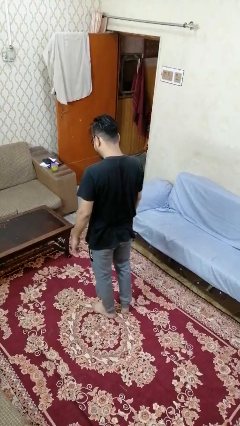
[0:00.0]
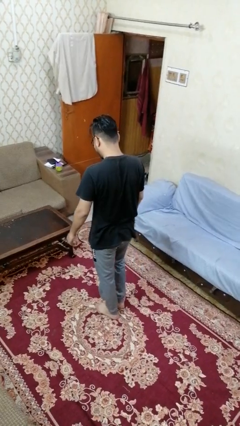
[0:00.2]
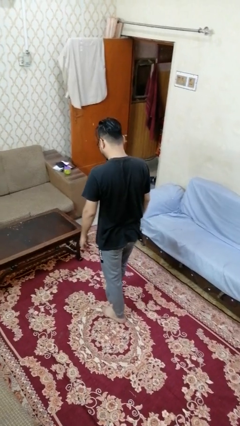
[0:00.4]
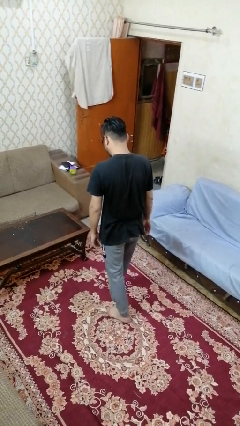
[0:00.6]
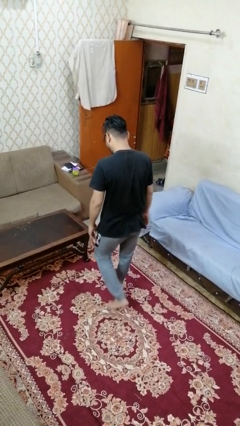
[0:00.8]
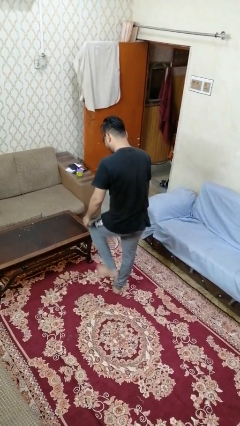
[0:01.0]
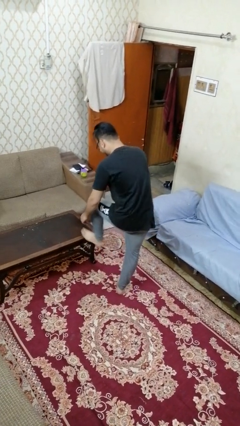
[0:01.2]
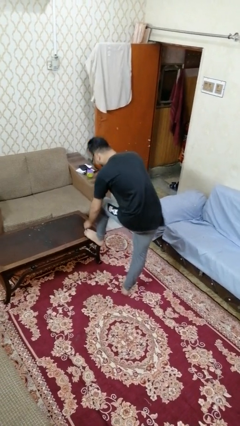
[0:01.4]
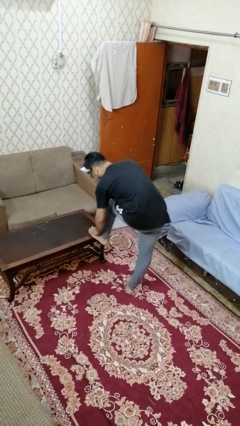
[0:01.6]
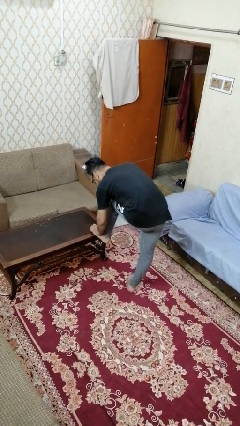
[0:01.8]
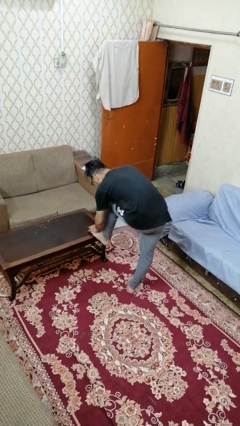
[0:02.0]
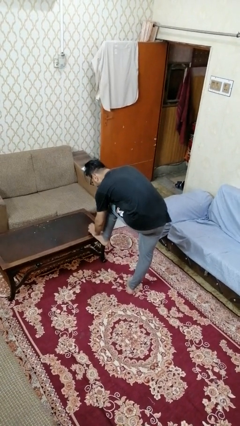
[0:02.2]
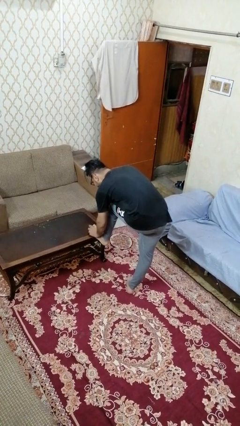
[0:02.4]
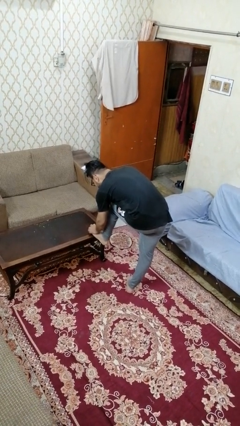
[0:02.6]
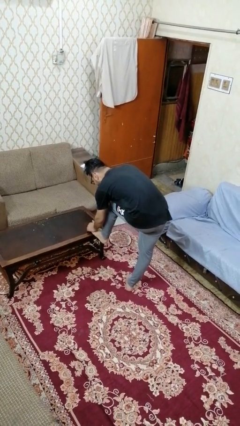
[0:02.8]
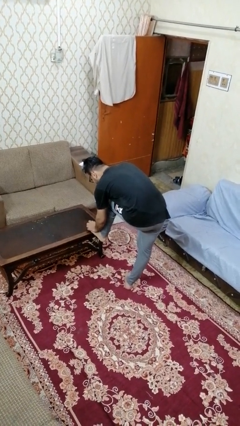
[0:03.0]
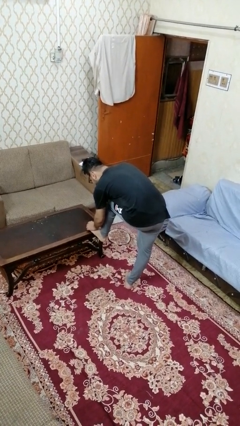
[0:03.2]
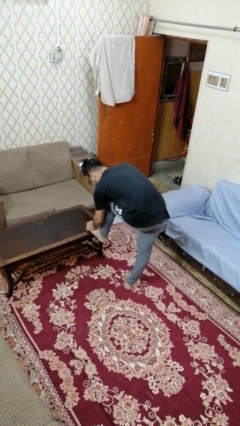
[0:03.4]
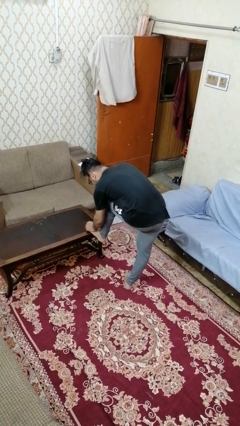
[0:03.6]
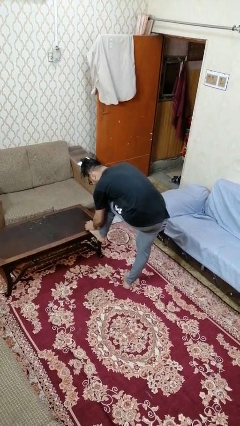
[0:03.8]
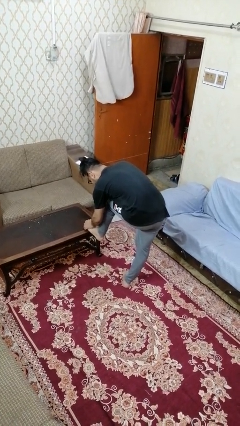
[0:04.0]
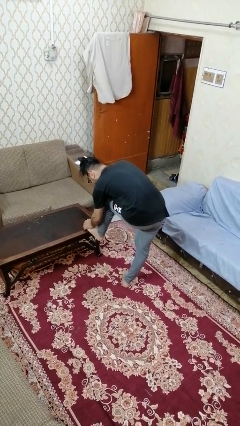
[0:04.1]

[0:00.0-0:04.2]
person stubs toe

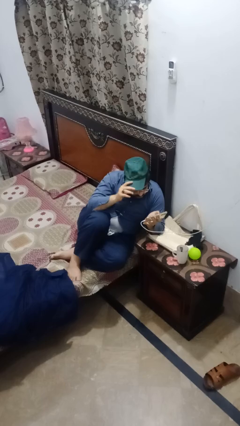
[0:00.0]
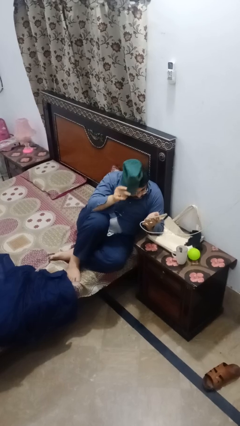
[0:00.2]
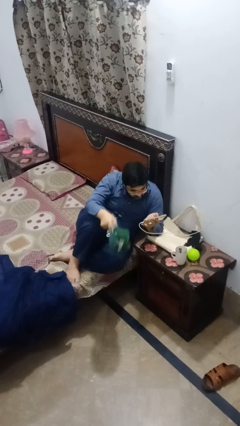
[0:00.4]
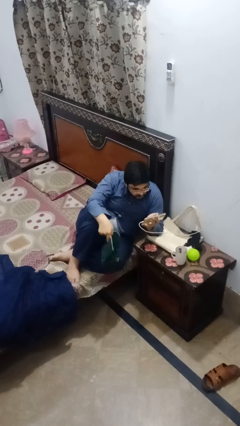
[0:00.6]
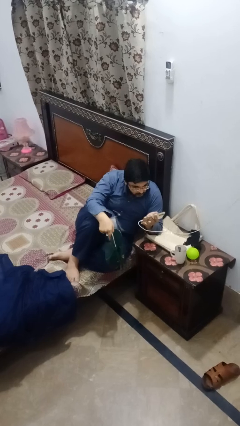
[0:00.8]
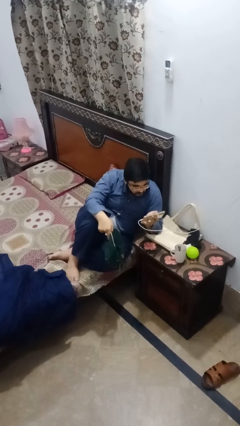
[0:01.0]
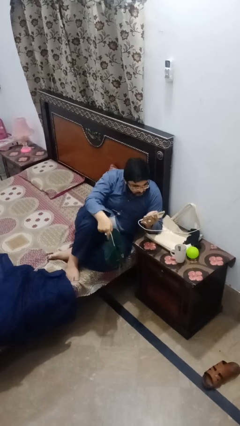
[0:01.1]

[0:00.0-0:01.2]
person takes off hat

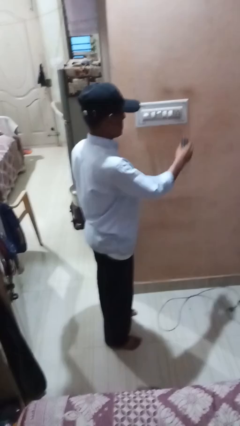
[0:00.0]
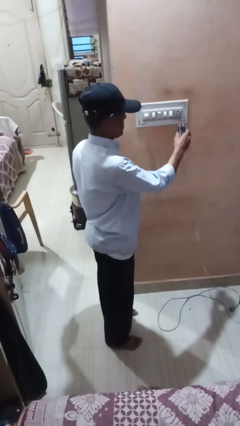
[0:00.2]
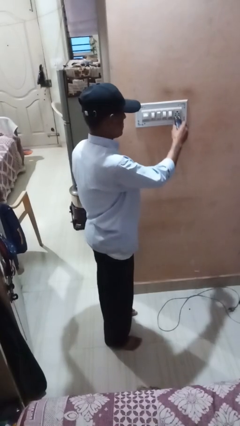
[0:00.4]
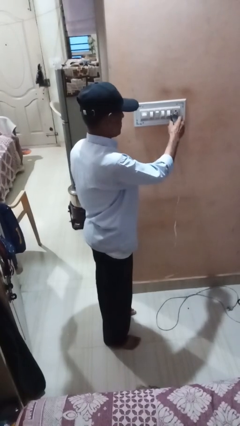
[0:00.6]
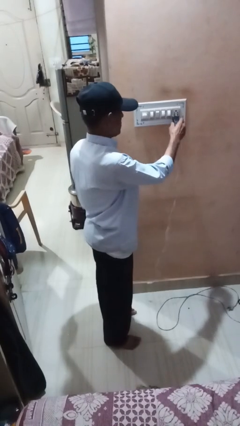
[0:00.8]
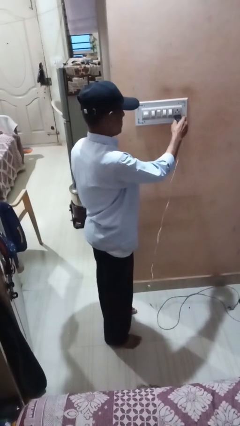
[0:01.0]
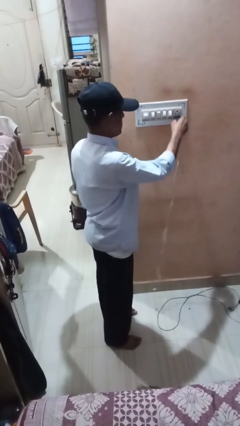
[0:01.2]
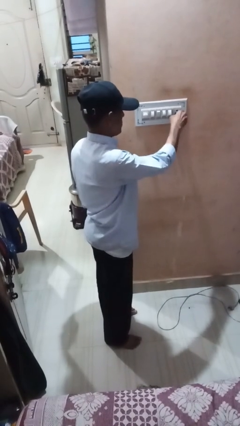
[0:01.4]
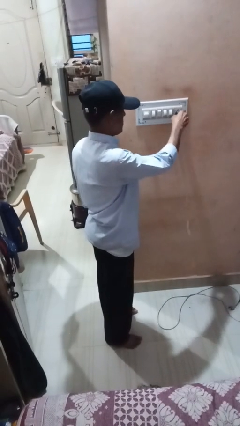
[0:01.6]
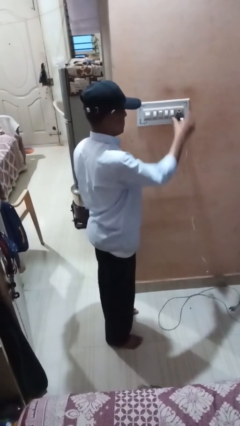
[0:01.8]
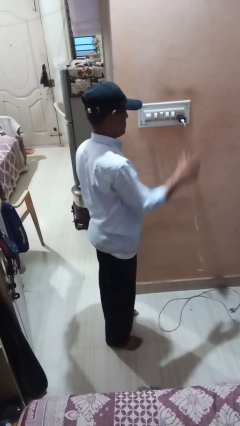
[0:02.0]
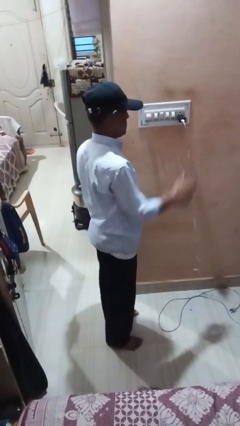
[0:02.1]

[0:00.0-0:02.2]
person plugs into electrical socket

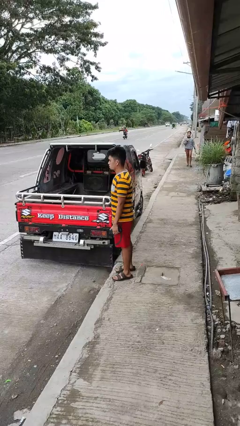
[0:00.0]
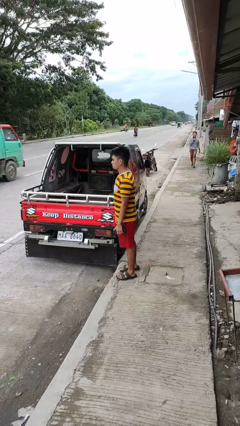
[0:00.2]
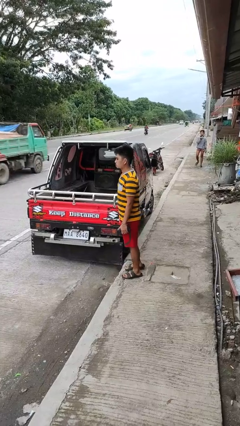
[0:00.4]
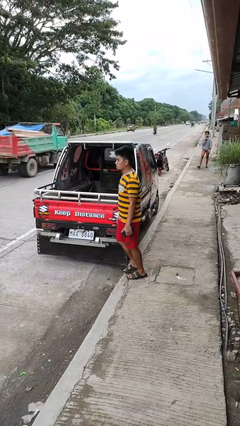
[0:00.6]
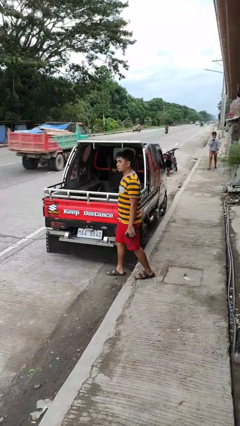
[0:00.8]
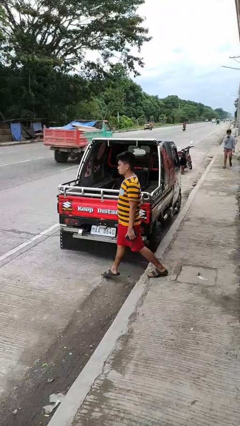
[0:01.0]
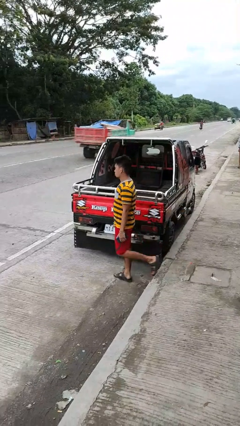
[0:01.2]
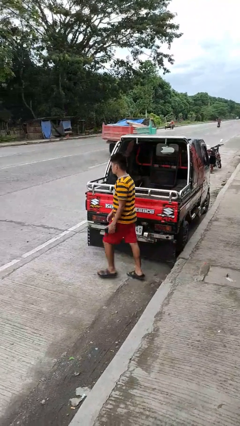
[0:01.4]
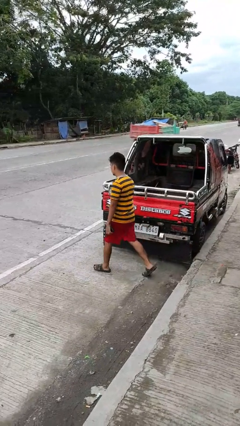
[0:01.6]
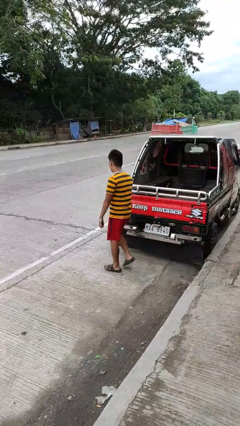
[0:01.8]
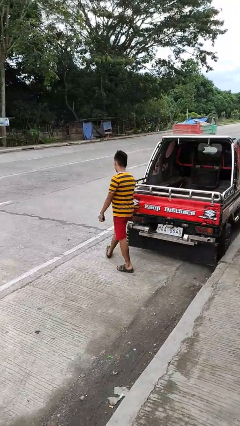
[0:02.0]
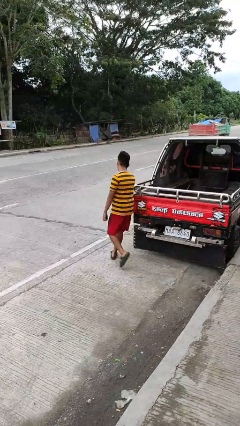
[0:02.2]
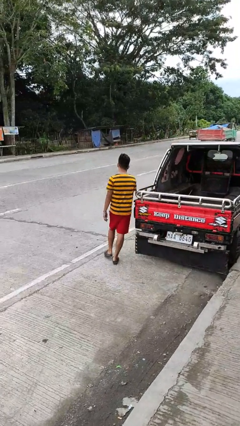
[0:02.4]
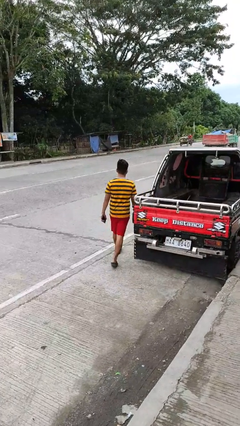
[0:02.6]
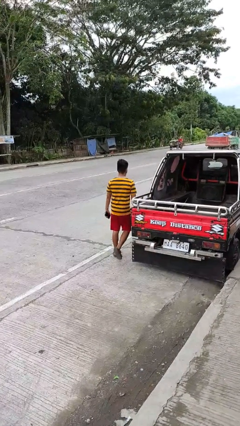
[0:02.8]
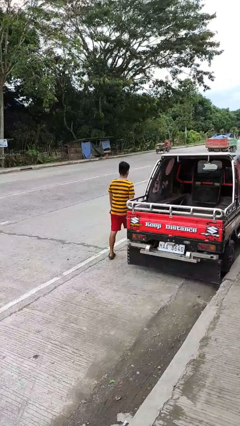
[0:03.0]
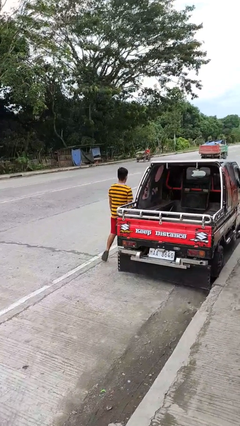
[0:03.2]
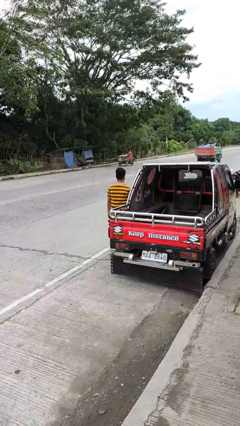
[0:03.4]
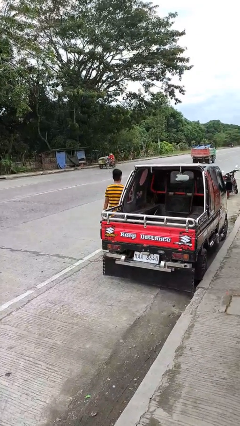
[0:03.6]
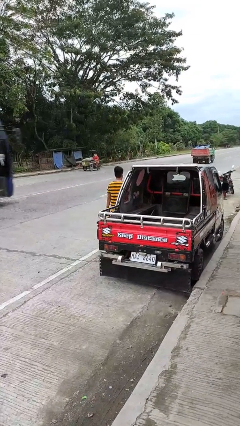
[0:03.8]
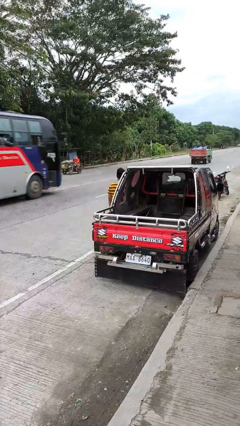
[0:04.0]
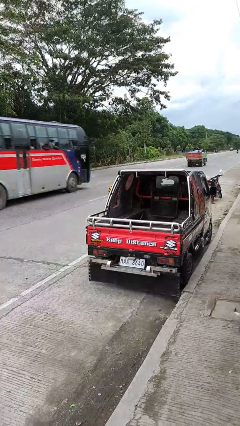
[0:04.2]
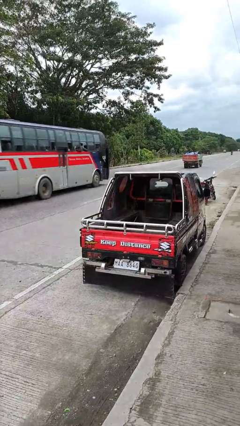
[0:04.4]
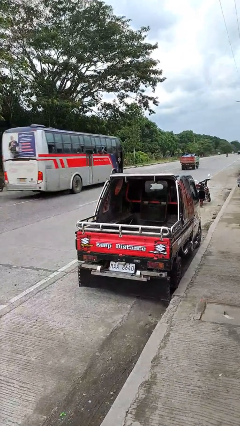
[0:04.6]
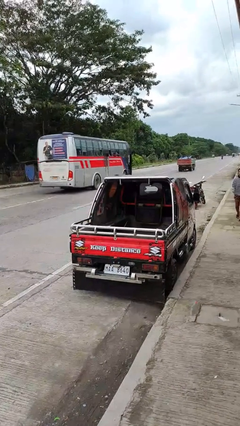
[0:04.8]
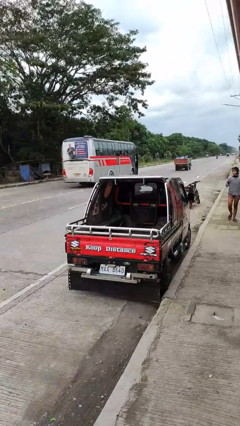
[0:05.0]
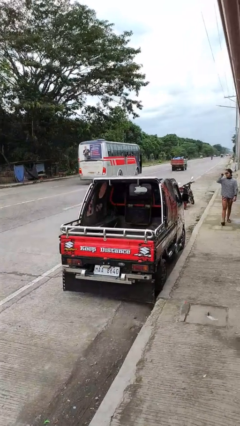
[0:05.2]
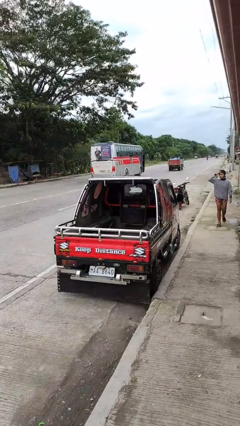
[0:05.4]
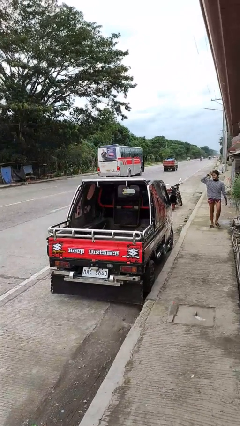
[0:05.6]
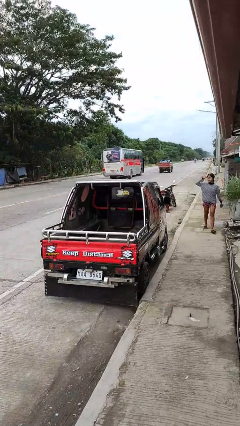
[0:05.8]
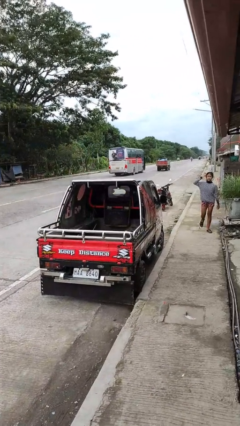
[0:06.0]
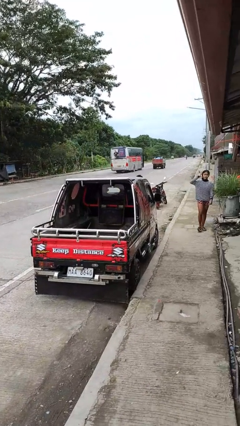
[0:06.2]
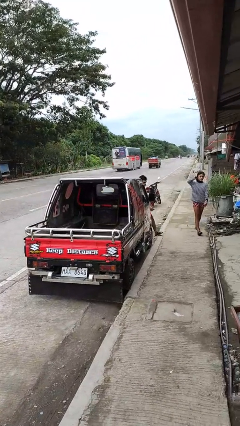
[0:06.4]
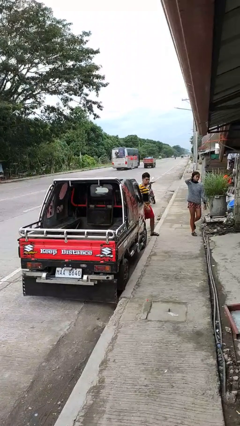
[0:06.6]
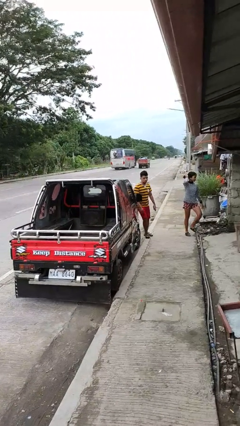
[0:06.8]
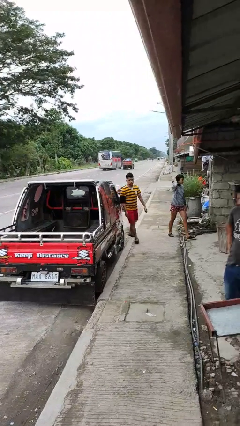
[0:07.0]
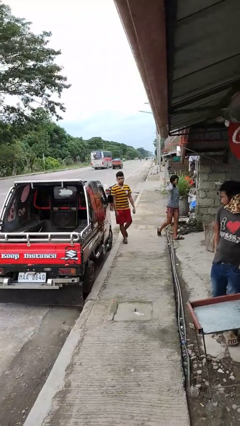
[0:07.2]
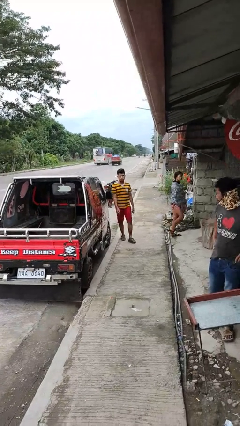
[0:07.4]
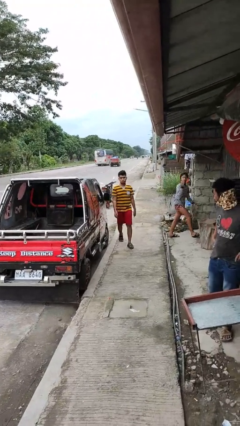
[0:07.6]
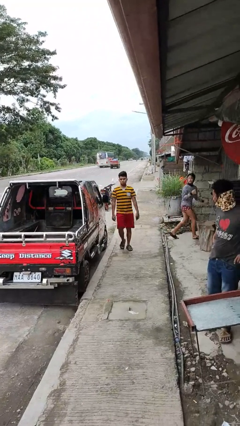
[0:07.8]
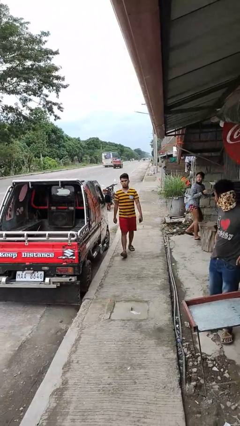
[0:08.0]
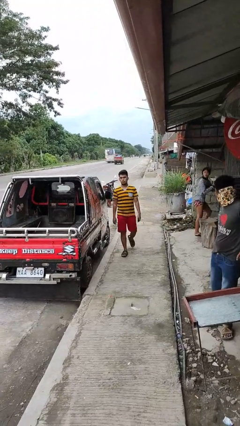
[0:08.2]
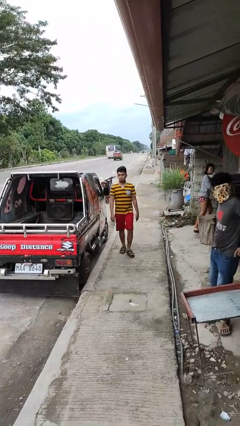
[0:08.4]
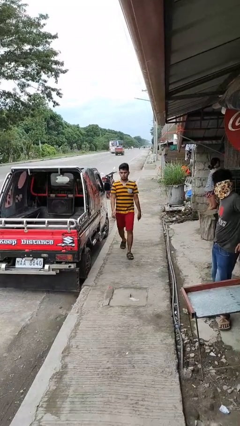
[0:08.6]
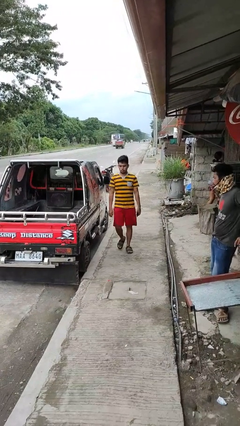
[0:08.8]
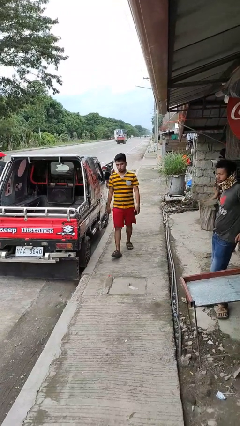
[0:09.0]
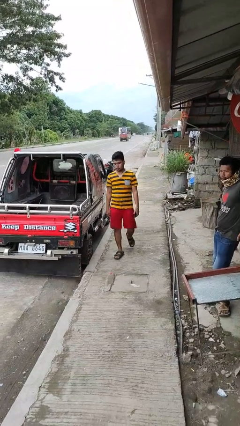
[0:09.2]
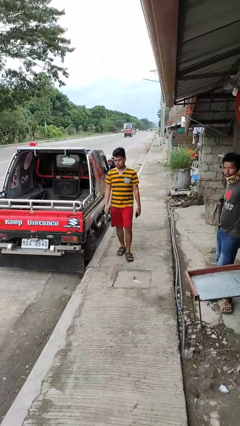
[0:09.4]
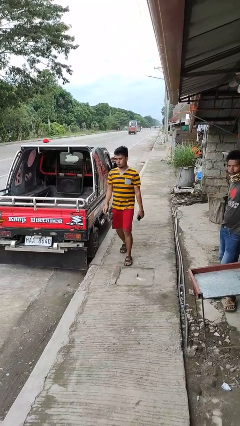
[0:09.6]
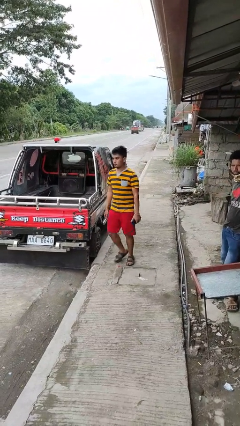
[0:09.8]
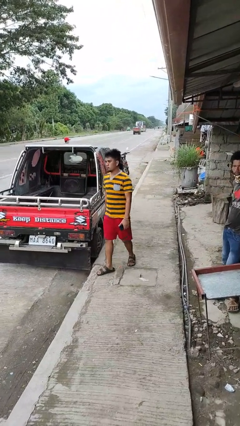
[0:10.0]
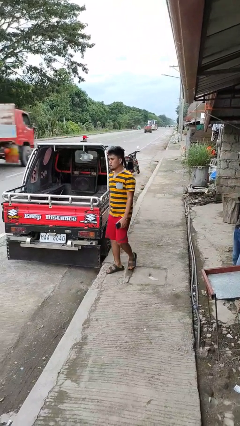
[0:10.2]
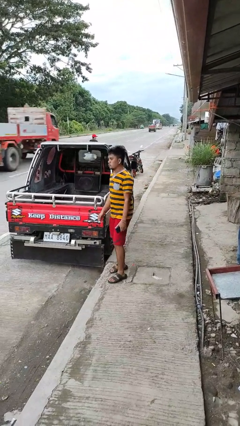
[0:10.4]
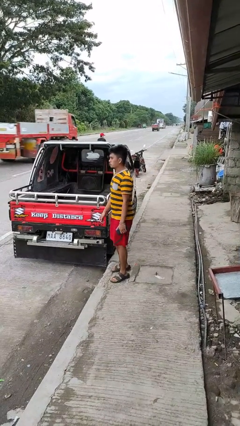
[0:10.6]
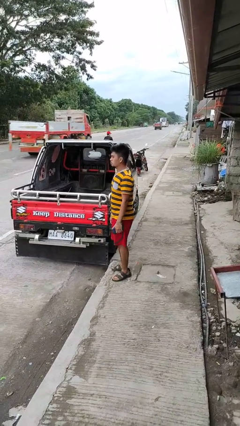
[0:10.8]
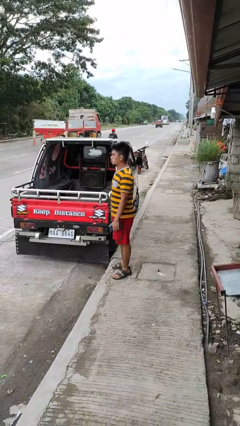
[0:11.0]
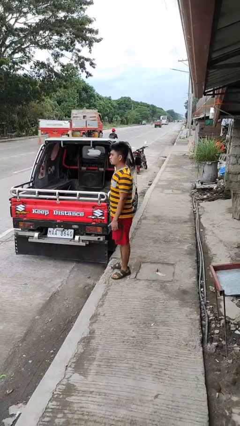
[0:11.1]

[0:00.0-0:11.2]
person walks around car
